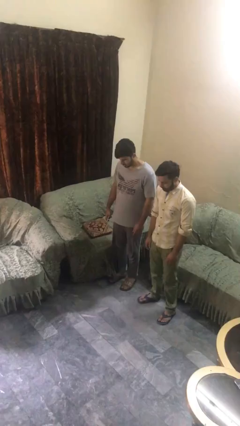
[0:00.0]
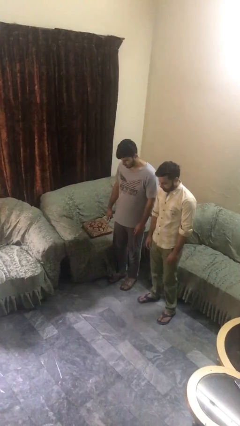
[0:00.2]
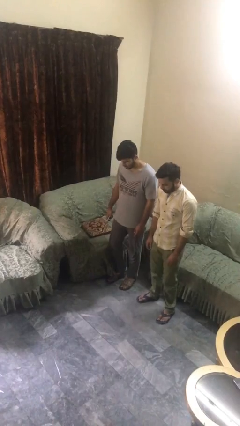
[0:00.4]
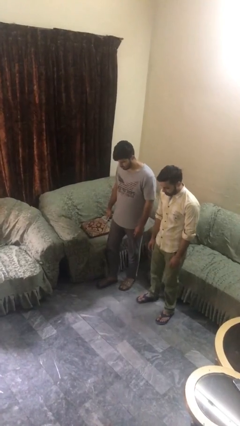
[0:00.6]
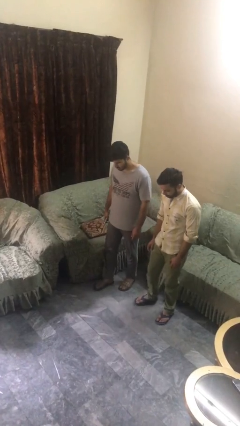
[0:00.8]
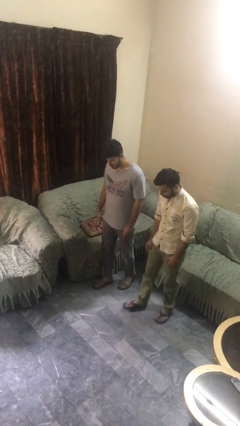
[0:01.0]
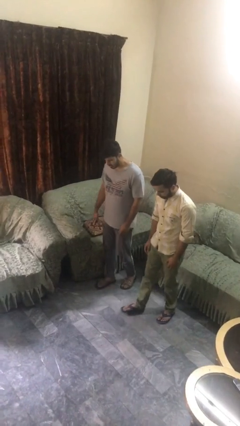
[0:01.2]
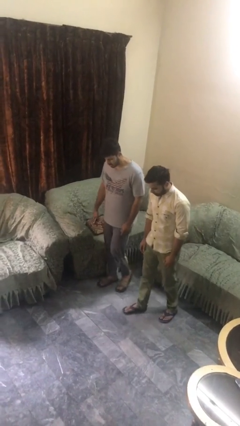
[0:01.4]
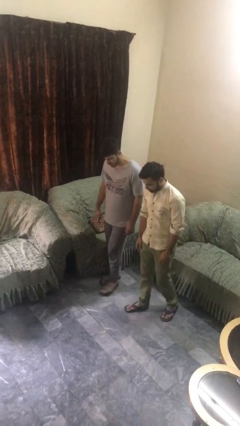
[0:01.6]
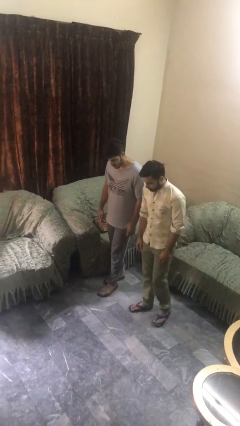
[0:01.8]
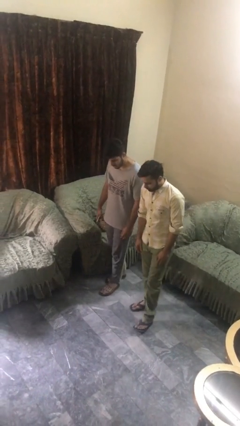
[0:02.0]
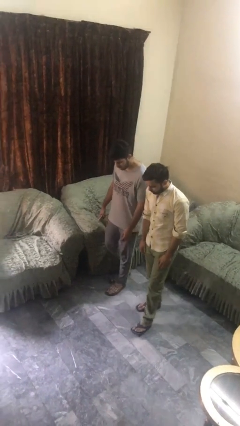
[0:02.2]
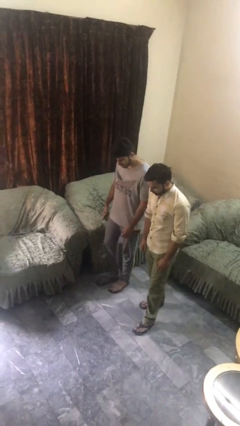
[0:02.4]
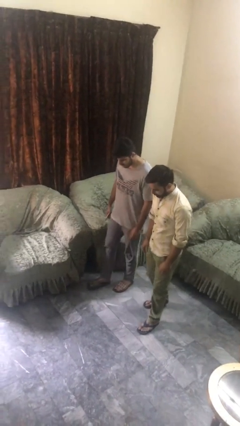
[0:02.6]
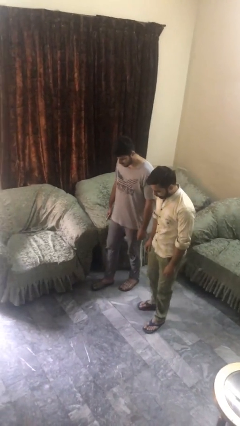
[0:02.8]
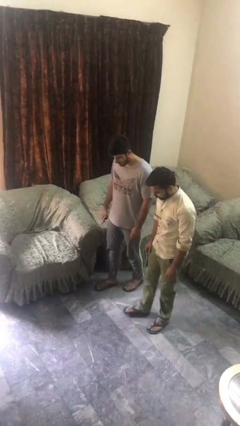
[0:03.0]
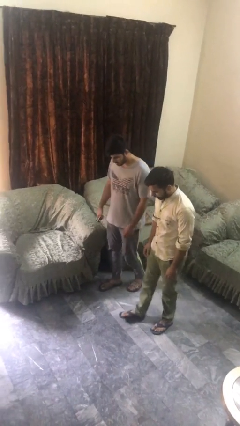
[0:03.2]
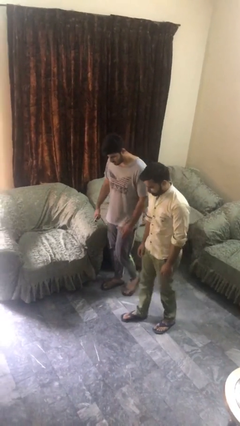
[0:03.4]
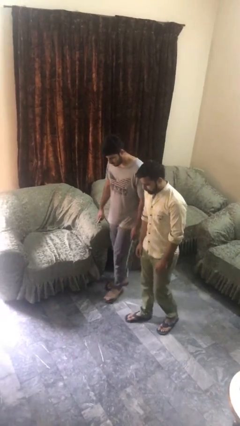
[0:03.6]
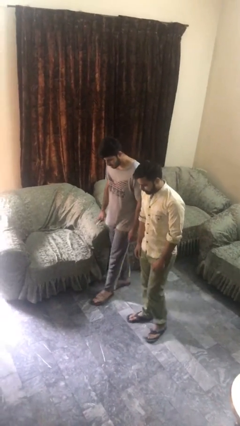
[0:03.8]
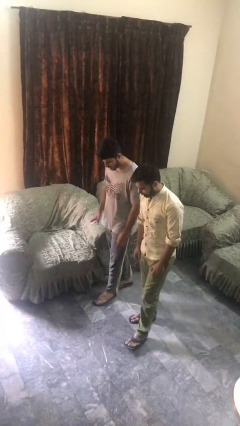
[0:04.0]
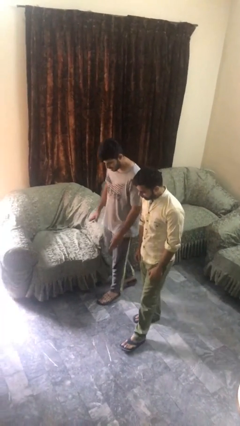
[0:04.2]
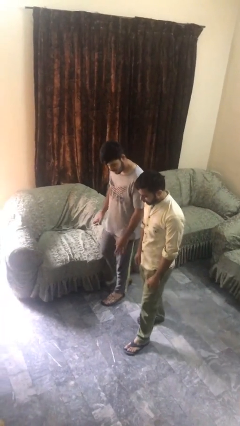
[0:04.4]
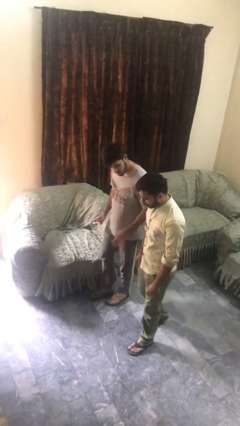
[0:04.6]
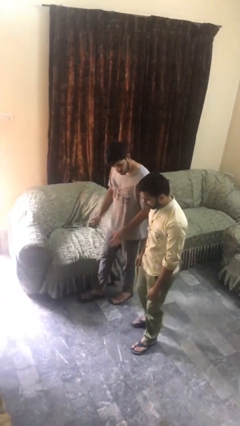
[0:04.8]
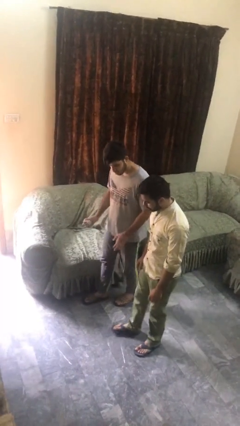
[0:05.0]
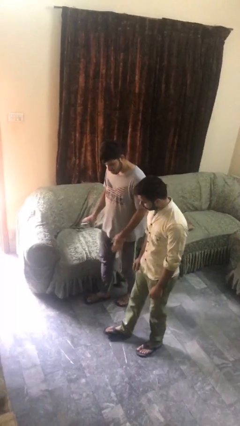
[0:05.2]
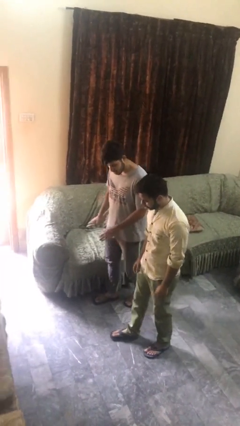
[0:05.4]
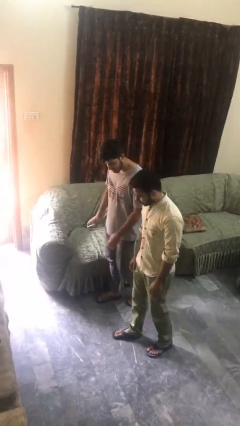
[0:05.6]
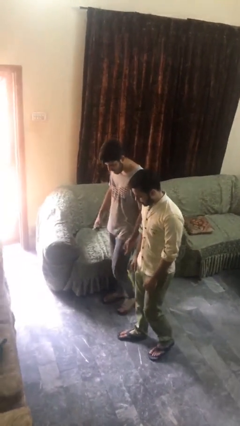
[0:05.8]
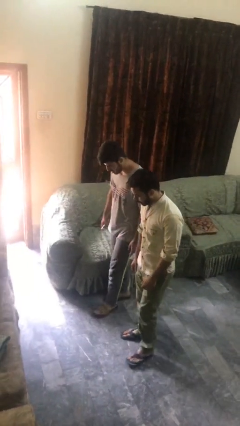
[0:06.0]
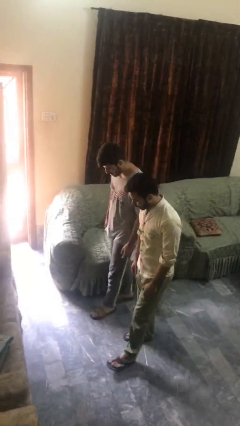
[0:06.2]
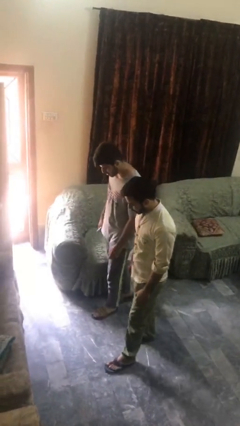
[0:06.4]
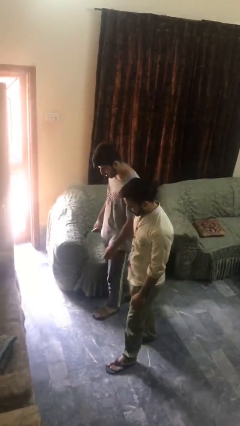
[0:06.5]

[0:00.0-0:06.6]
person talks to person

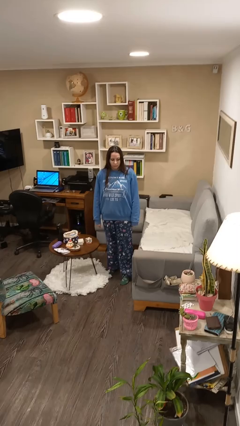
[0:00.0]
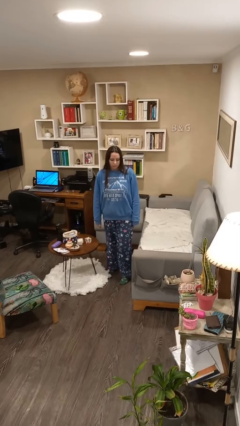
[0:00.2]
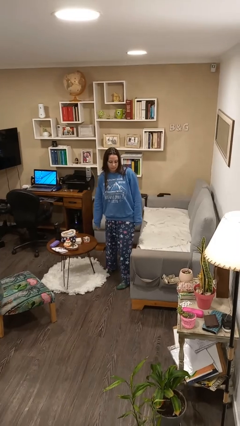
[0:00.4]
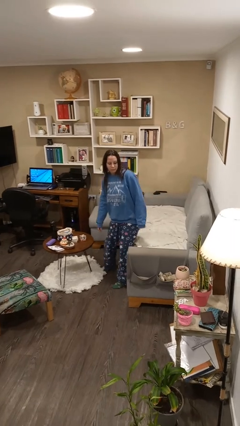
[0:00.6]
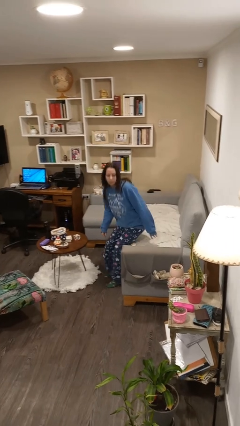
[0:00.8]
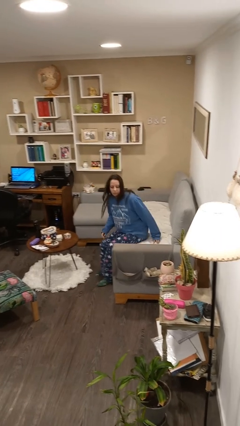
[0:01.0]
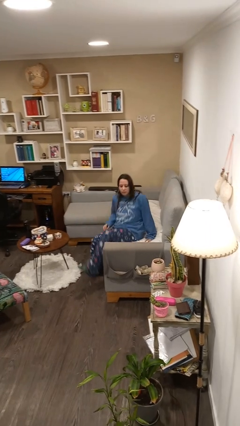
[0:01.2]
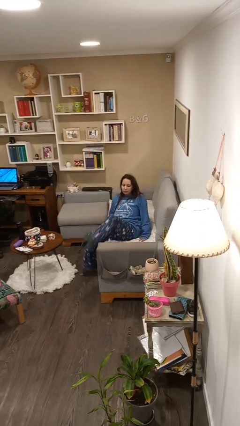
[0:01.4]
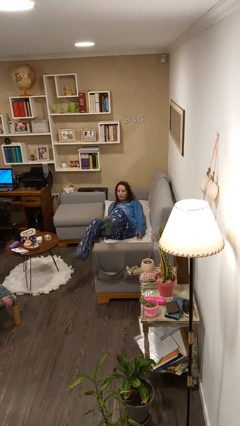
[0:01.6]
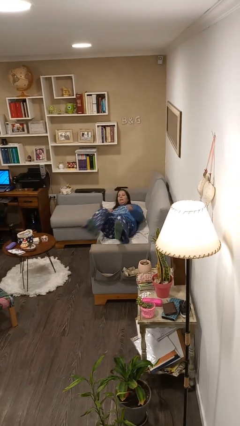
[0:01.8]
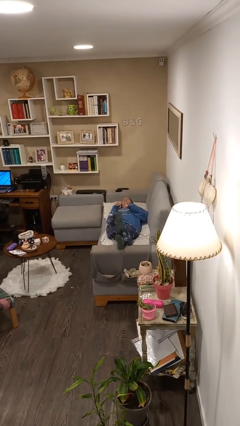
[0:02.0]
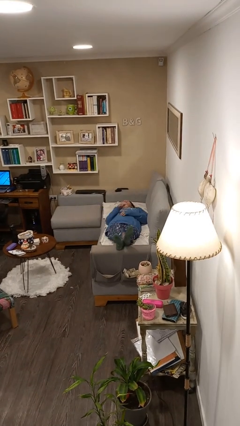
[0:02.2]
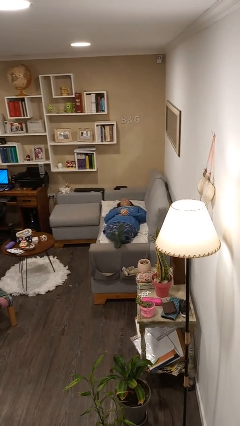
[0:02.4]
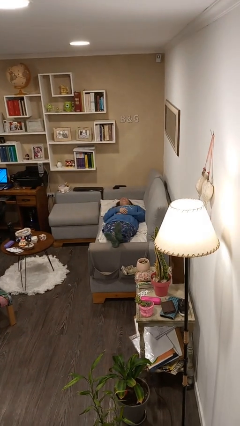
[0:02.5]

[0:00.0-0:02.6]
person lies down on couch

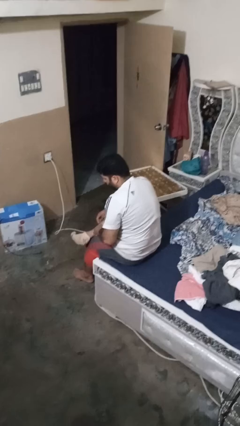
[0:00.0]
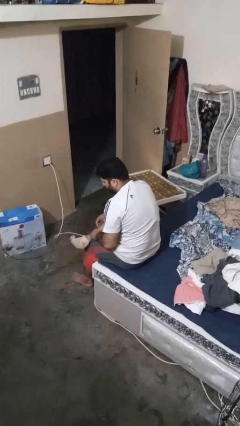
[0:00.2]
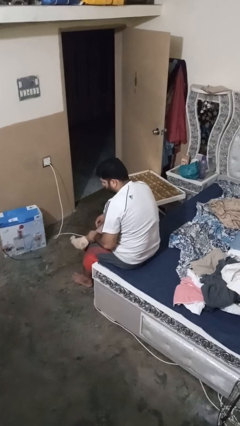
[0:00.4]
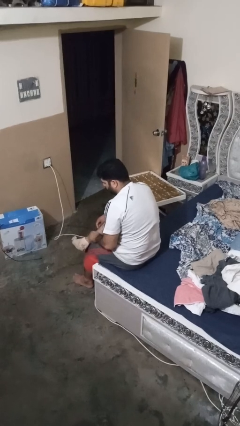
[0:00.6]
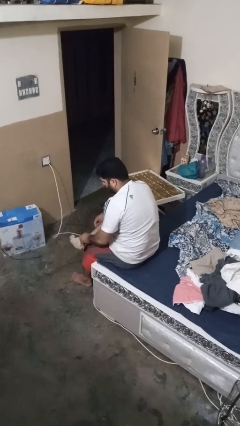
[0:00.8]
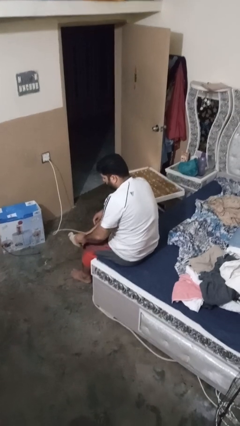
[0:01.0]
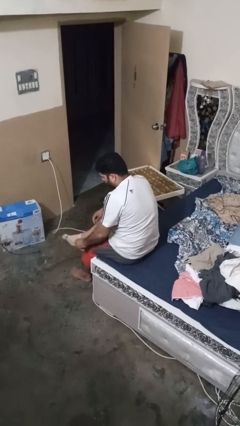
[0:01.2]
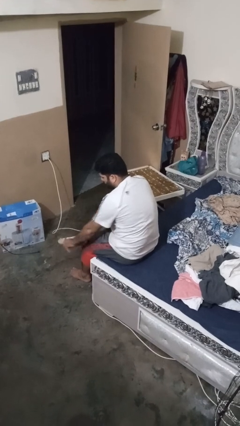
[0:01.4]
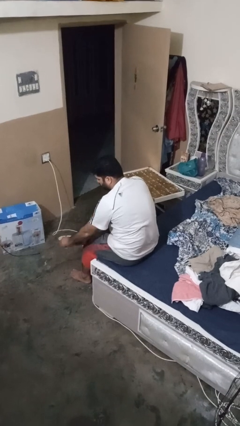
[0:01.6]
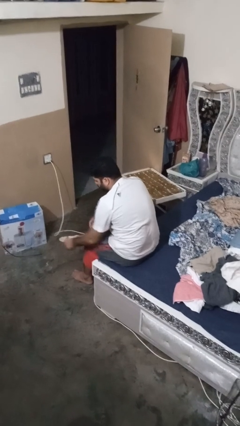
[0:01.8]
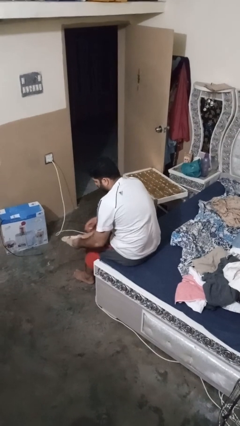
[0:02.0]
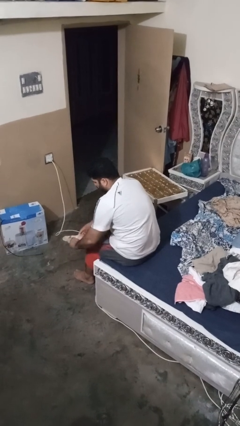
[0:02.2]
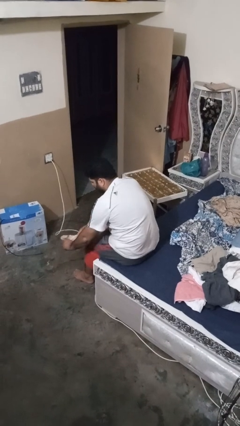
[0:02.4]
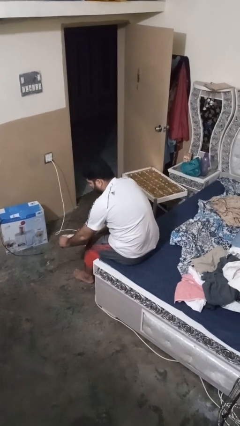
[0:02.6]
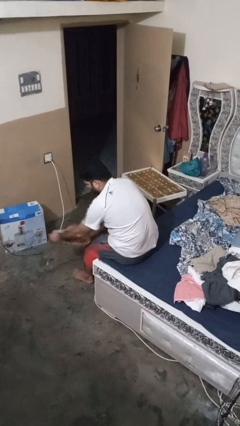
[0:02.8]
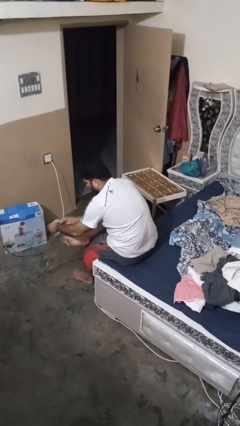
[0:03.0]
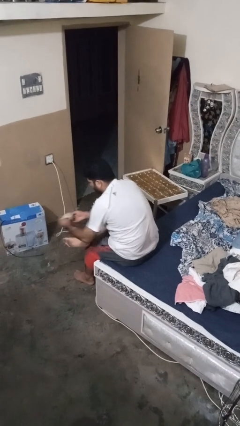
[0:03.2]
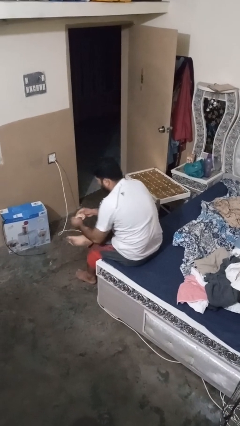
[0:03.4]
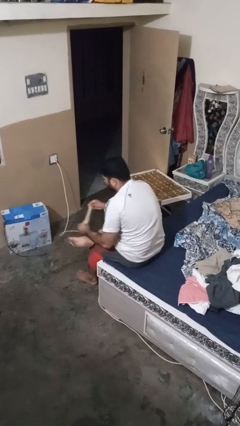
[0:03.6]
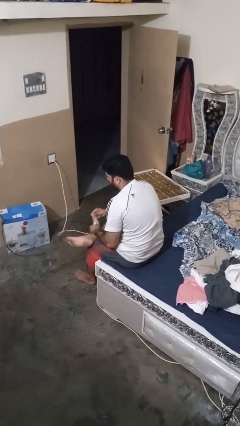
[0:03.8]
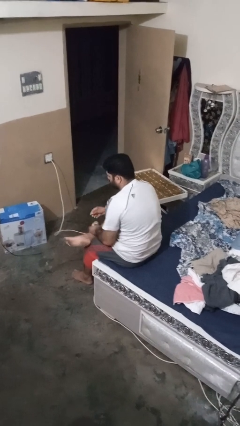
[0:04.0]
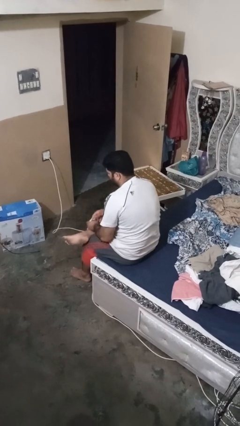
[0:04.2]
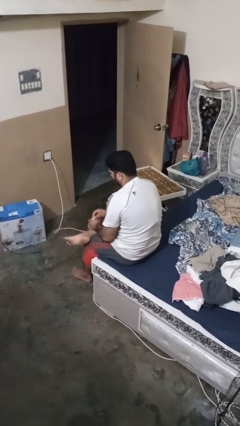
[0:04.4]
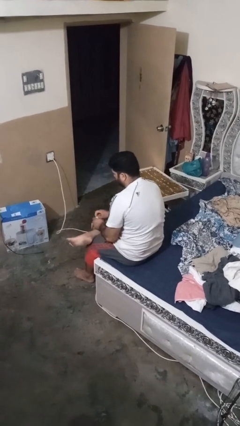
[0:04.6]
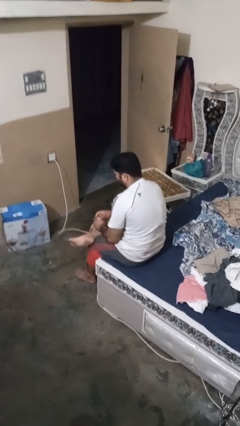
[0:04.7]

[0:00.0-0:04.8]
person takes off socks

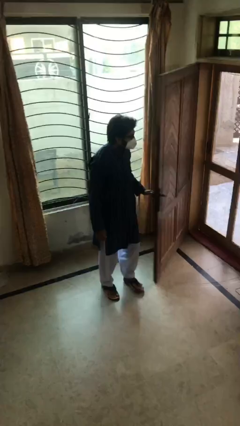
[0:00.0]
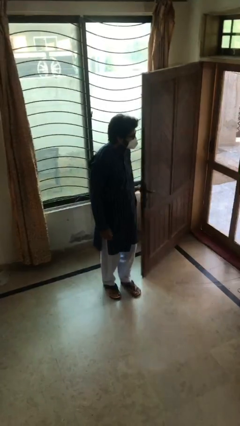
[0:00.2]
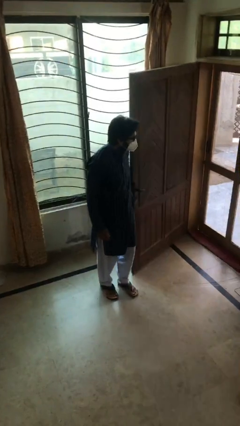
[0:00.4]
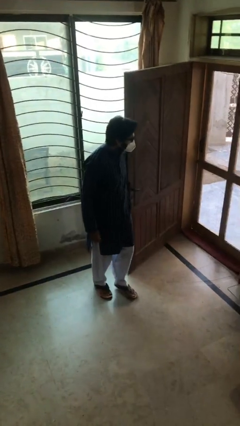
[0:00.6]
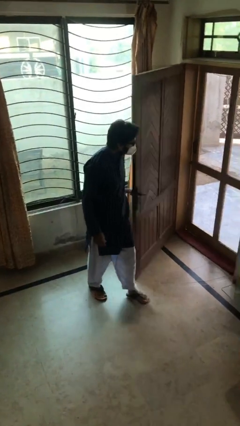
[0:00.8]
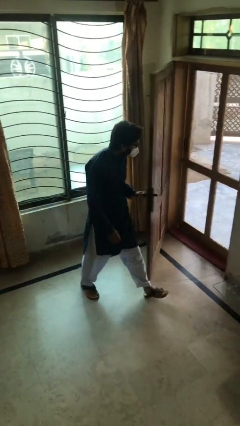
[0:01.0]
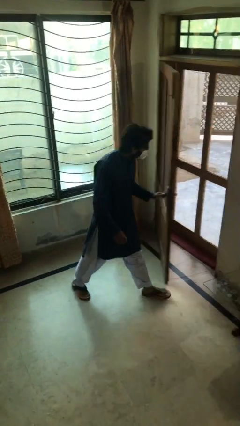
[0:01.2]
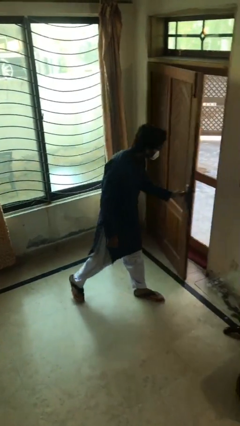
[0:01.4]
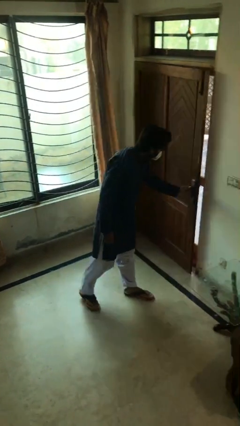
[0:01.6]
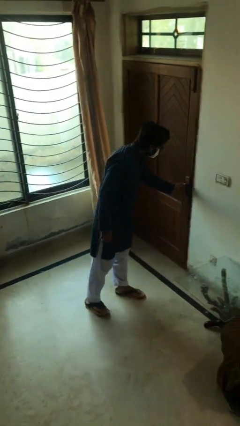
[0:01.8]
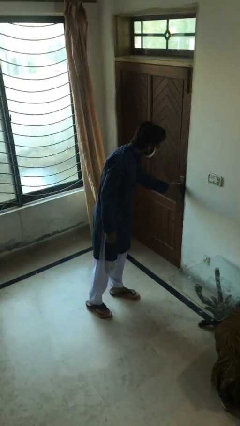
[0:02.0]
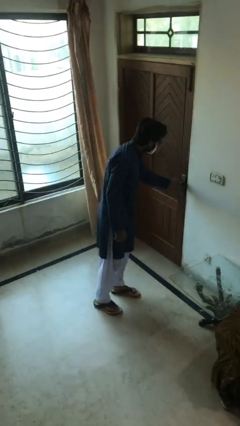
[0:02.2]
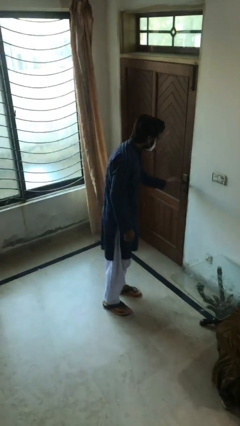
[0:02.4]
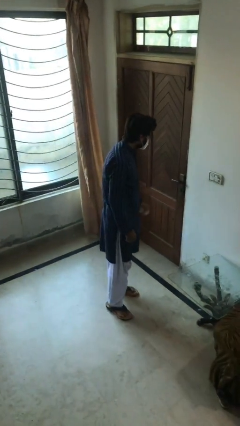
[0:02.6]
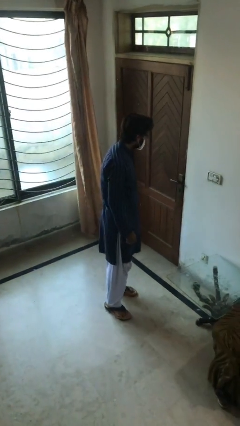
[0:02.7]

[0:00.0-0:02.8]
person closes facility door

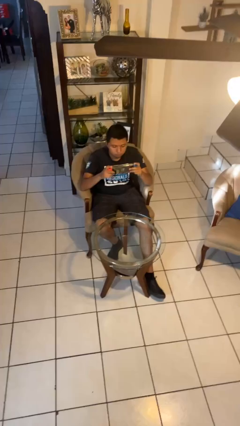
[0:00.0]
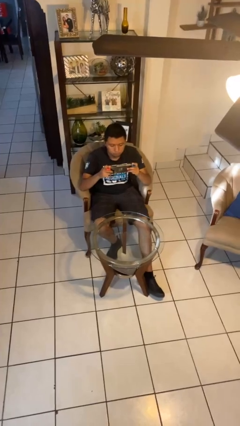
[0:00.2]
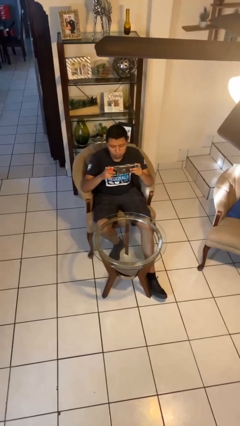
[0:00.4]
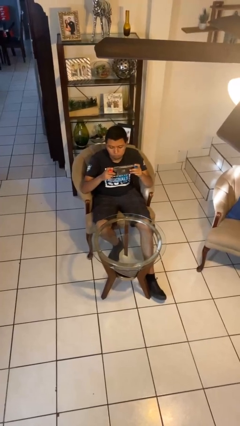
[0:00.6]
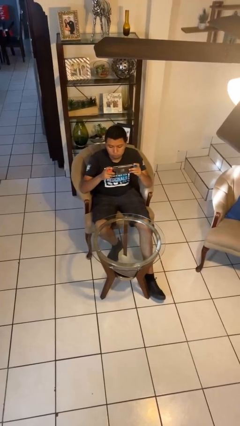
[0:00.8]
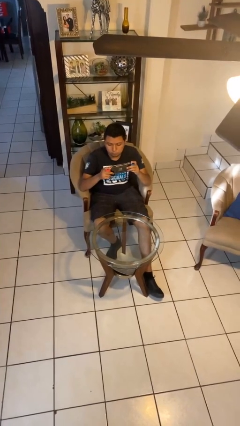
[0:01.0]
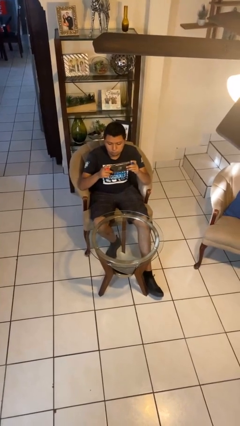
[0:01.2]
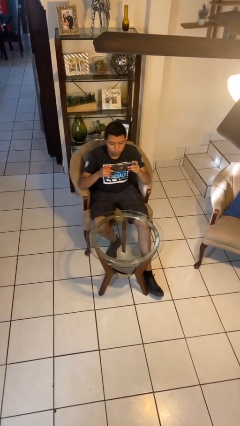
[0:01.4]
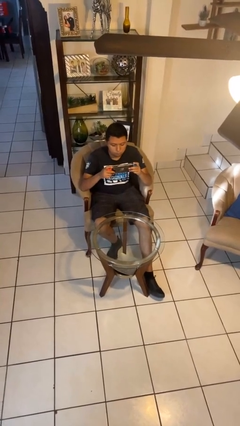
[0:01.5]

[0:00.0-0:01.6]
person interacts with handheld game
